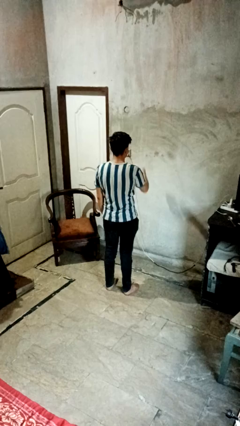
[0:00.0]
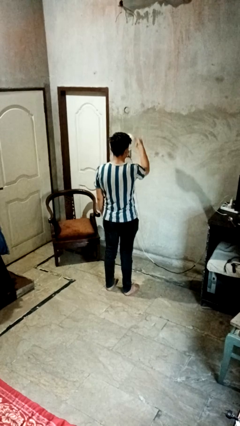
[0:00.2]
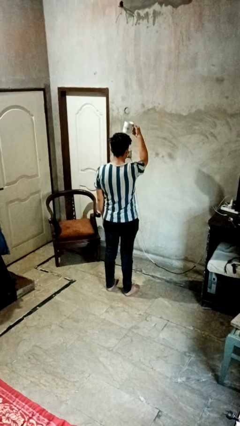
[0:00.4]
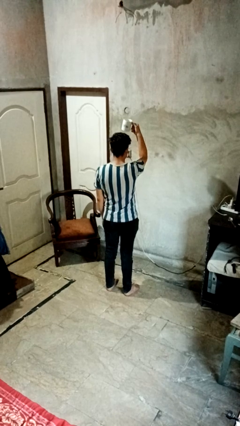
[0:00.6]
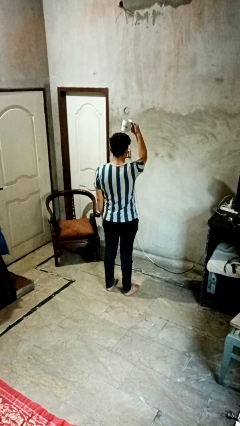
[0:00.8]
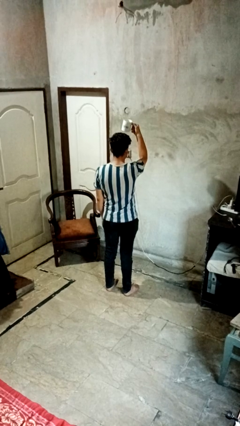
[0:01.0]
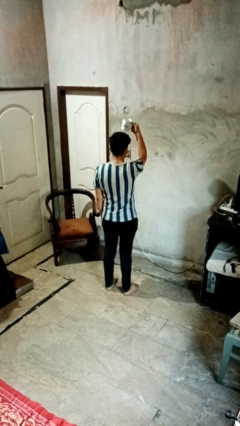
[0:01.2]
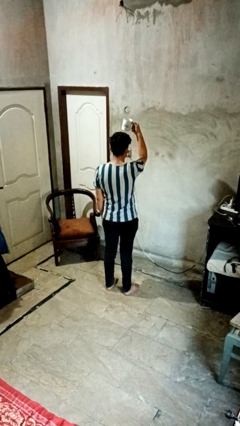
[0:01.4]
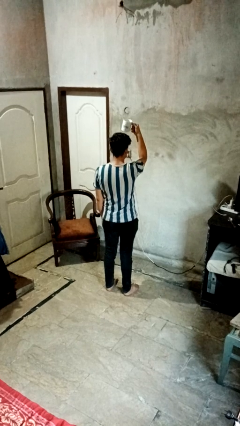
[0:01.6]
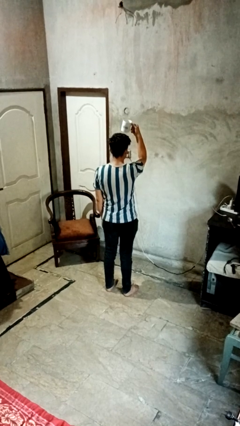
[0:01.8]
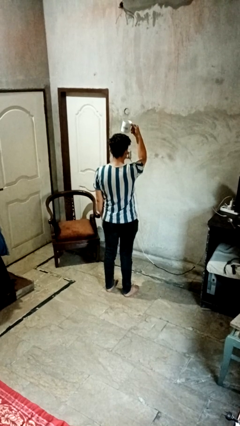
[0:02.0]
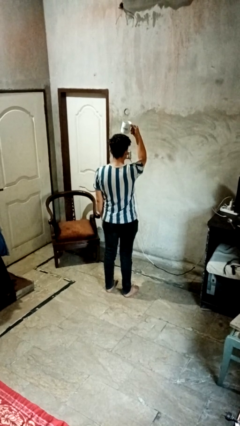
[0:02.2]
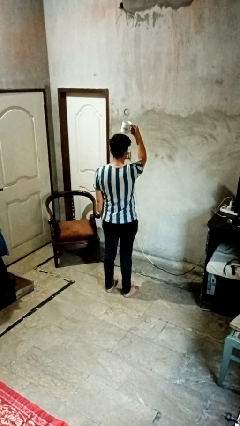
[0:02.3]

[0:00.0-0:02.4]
person holds object above head

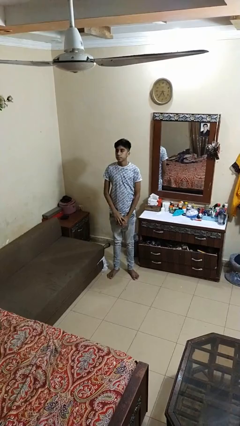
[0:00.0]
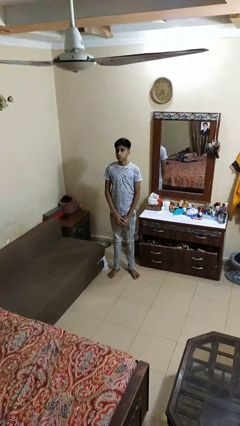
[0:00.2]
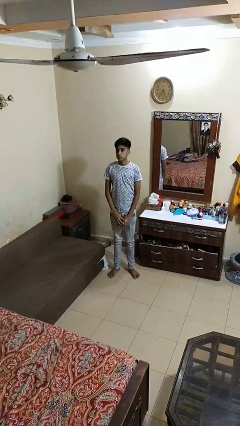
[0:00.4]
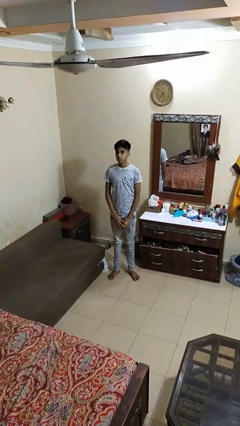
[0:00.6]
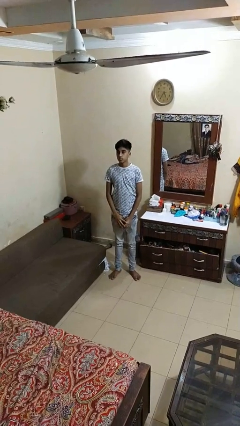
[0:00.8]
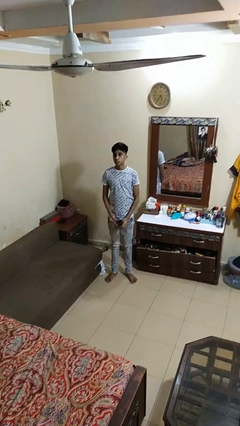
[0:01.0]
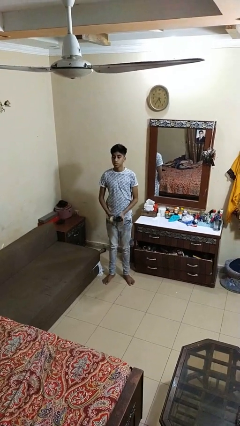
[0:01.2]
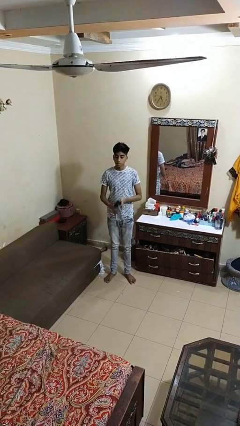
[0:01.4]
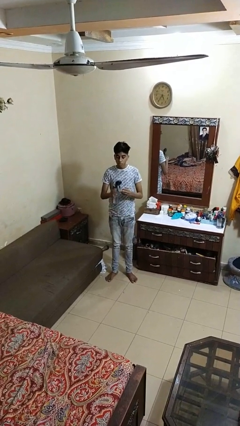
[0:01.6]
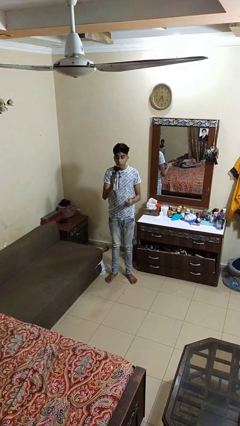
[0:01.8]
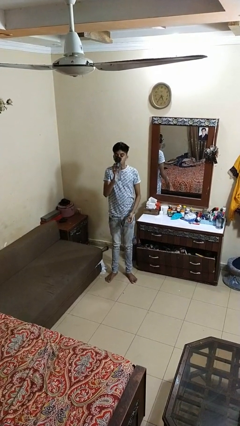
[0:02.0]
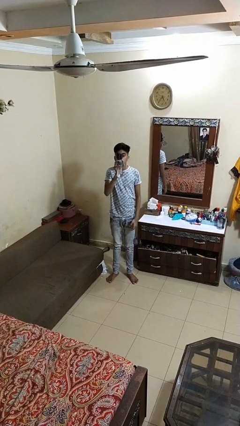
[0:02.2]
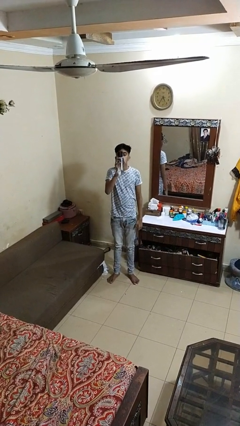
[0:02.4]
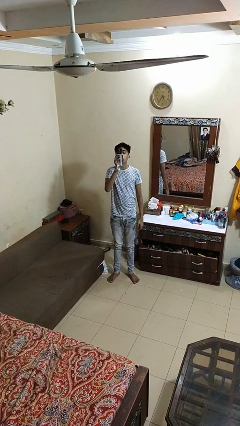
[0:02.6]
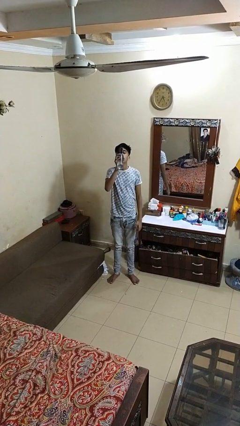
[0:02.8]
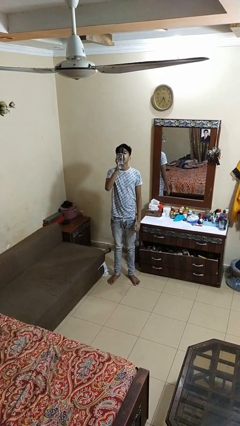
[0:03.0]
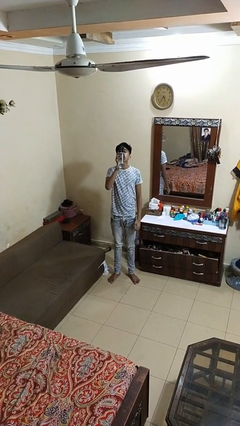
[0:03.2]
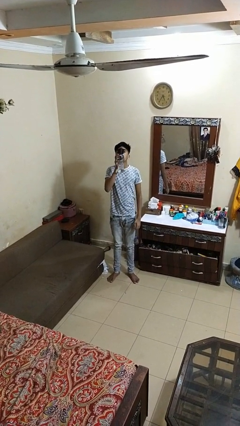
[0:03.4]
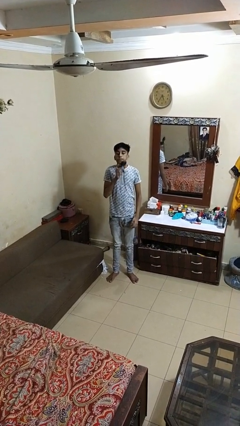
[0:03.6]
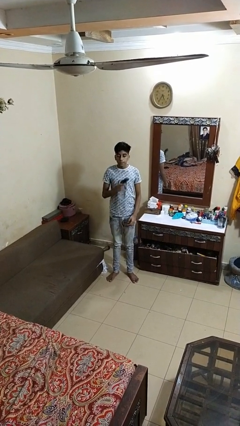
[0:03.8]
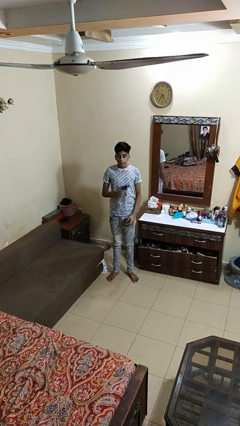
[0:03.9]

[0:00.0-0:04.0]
person drinks from bottle

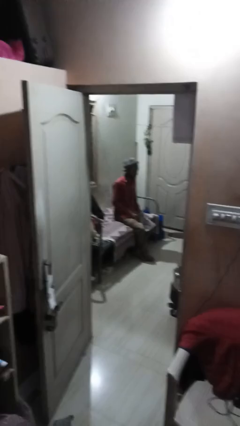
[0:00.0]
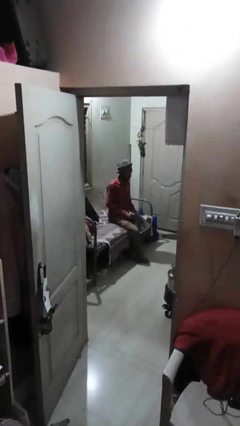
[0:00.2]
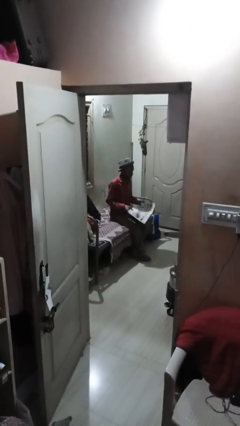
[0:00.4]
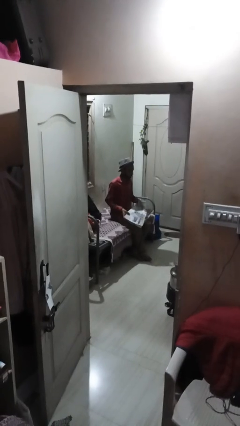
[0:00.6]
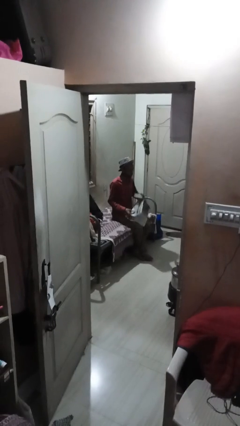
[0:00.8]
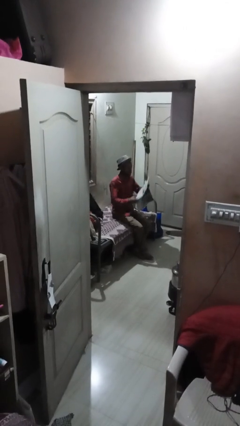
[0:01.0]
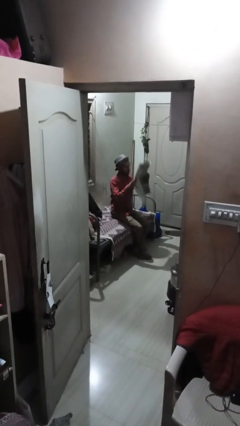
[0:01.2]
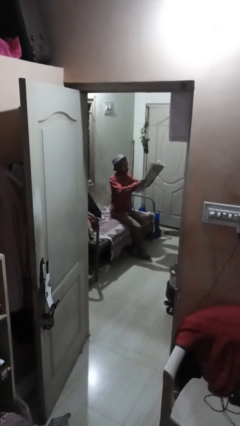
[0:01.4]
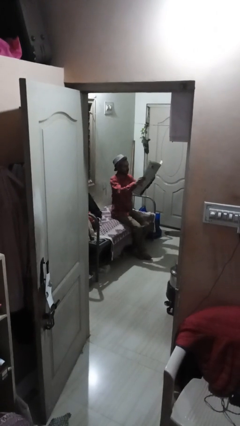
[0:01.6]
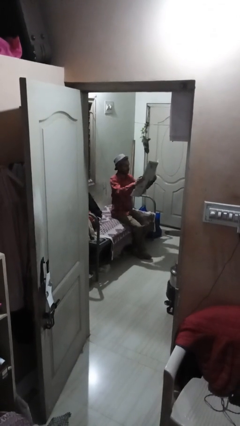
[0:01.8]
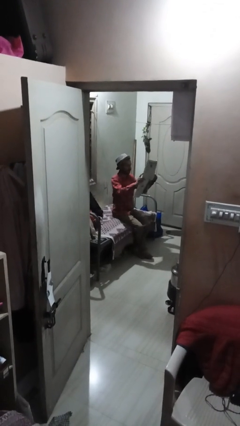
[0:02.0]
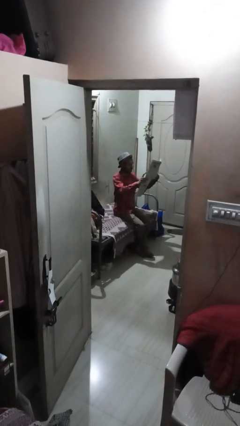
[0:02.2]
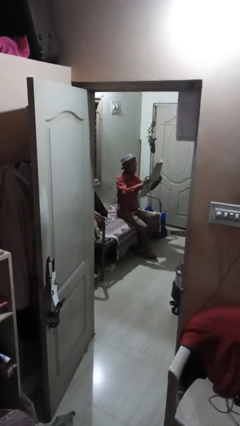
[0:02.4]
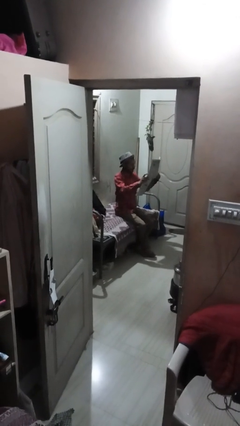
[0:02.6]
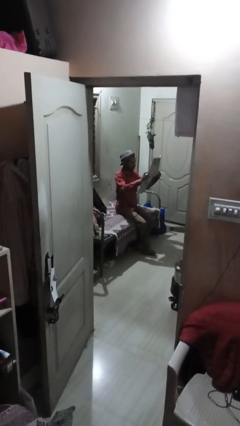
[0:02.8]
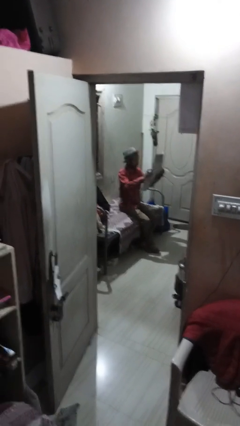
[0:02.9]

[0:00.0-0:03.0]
person reads newspaper

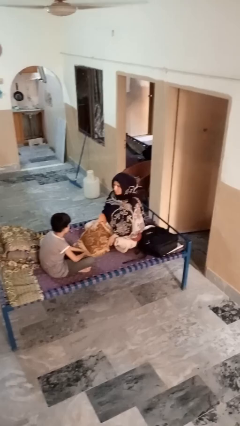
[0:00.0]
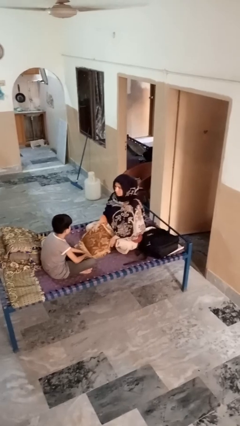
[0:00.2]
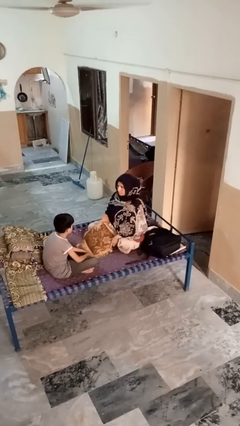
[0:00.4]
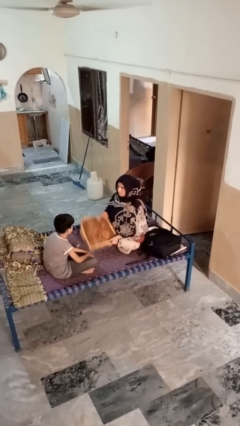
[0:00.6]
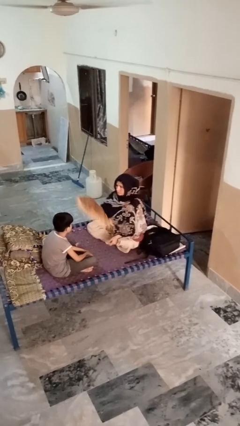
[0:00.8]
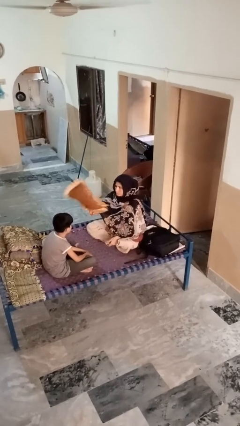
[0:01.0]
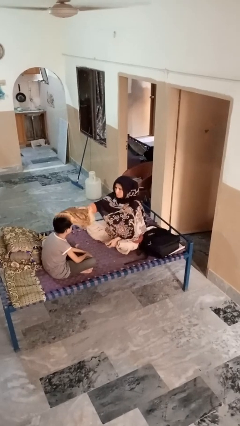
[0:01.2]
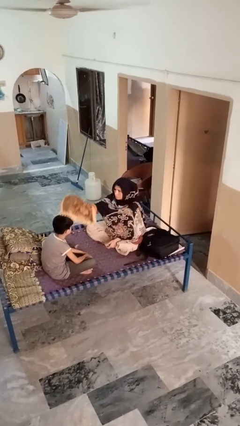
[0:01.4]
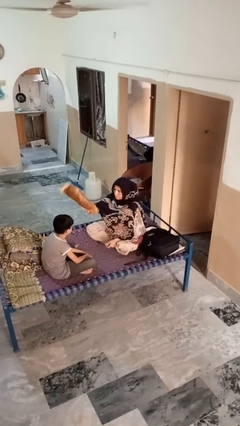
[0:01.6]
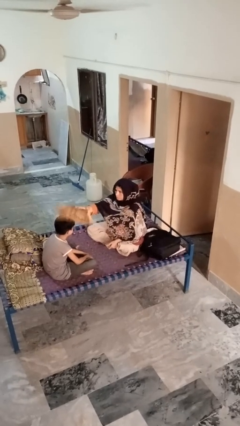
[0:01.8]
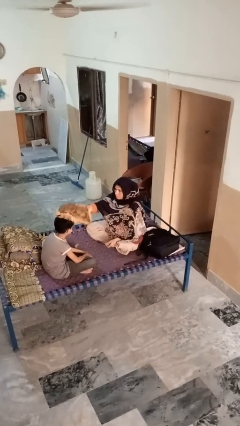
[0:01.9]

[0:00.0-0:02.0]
person hits person with pillow

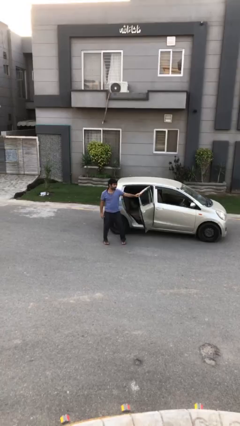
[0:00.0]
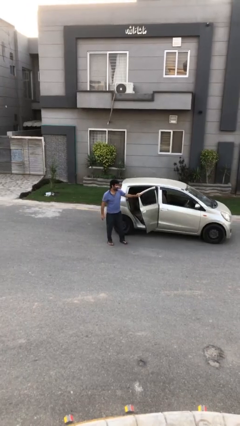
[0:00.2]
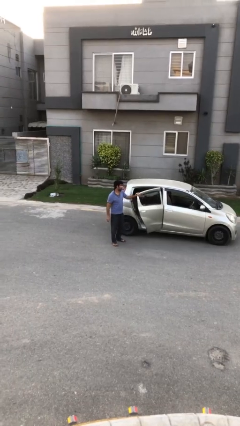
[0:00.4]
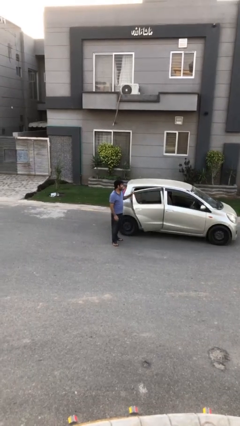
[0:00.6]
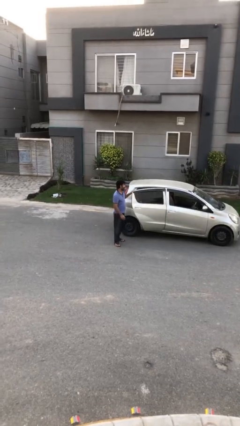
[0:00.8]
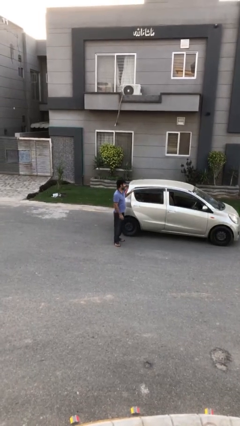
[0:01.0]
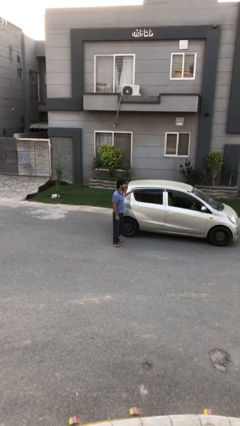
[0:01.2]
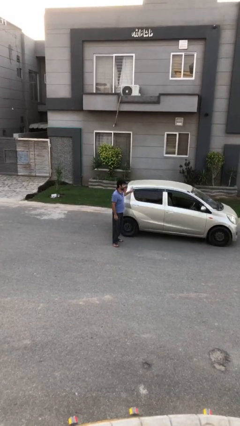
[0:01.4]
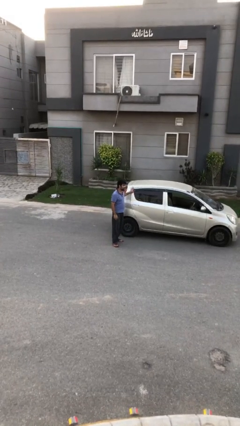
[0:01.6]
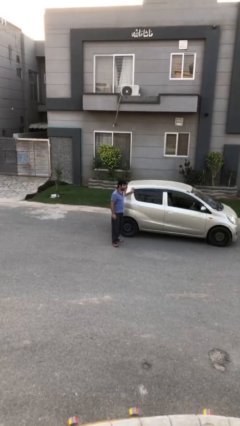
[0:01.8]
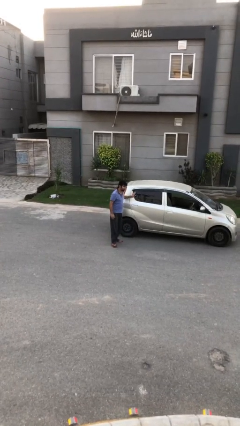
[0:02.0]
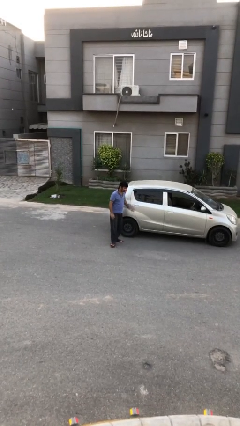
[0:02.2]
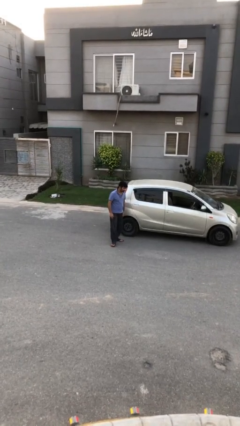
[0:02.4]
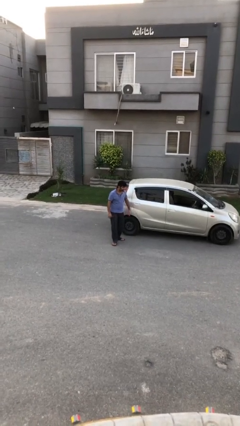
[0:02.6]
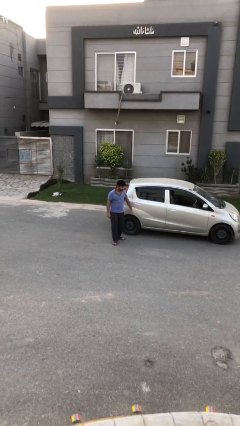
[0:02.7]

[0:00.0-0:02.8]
person closes car door

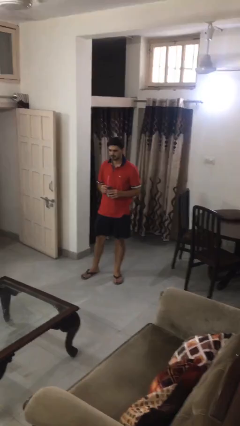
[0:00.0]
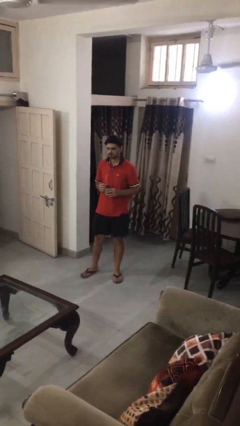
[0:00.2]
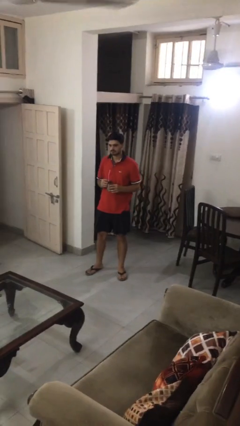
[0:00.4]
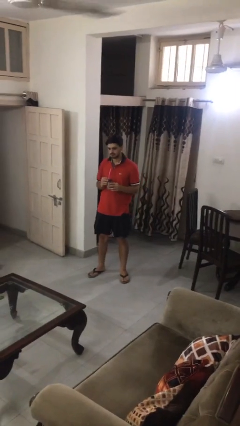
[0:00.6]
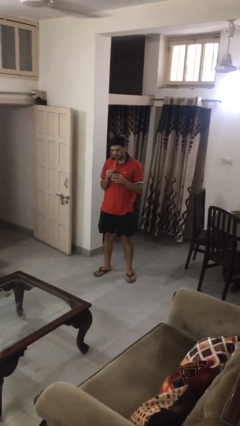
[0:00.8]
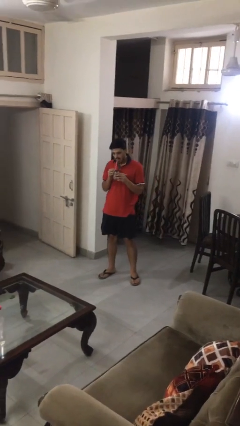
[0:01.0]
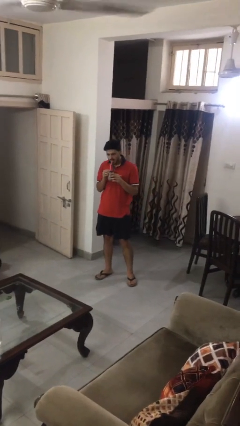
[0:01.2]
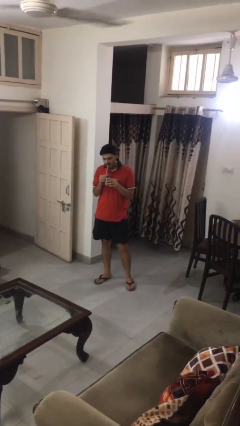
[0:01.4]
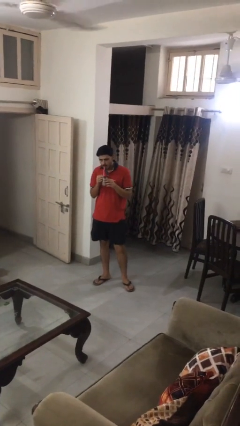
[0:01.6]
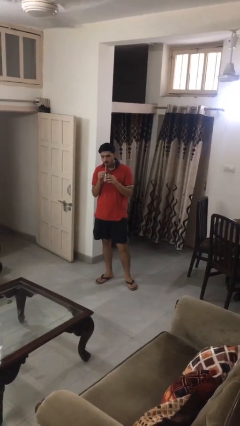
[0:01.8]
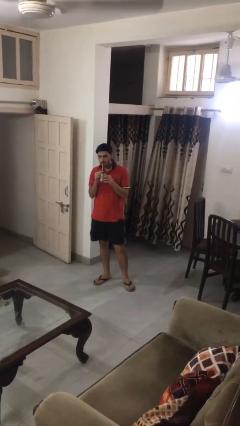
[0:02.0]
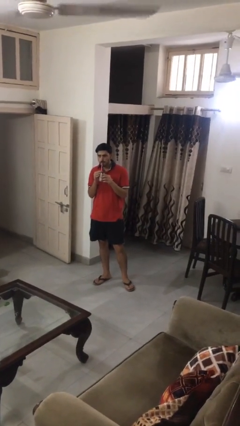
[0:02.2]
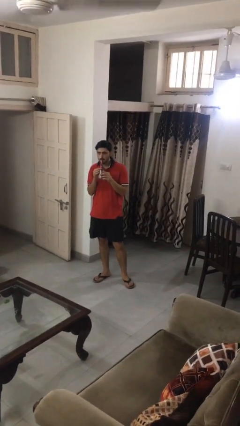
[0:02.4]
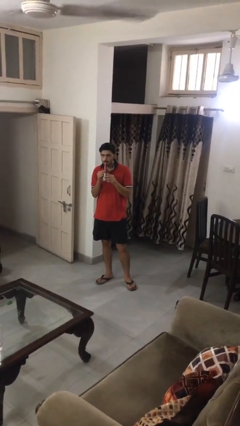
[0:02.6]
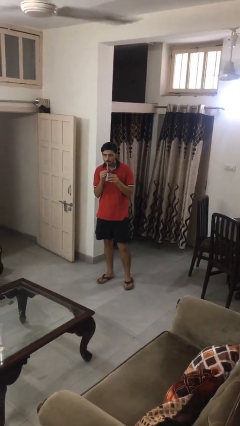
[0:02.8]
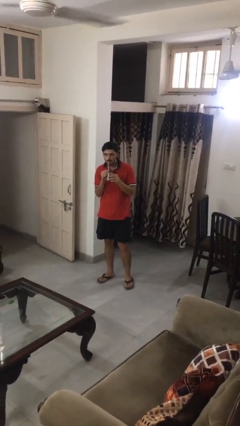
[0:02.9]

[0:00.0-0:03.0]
person drinks from straw
